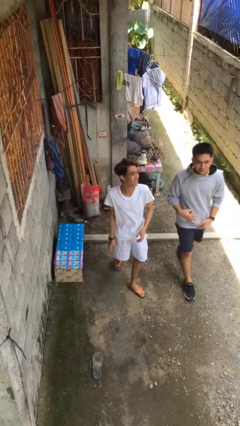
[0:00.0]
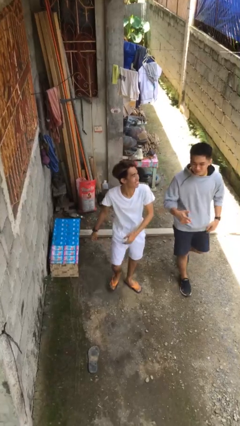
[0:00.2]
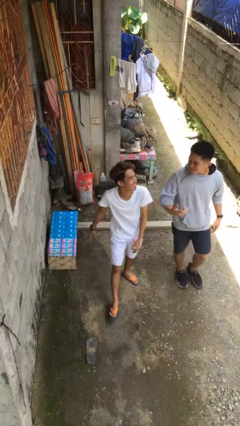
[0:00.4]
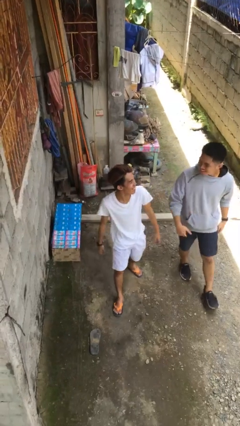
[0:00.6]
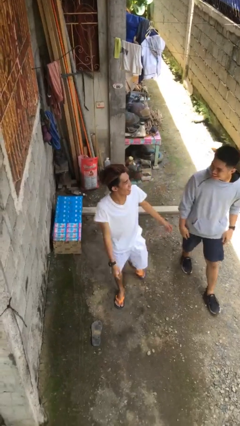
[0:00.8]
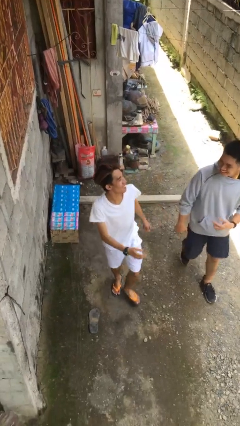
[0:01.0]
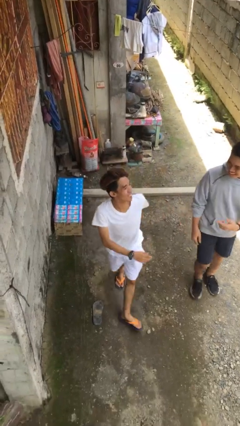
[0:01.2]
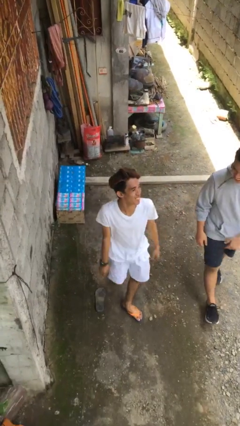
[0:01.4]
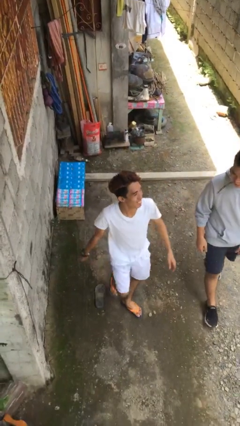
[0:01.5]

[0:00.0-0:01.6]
person talks to person

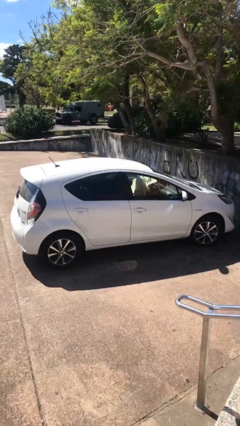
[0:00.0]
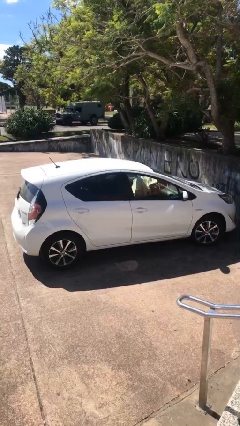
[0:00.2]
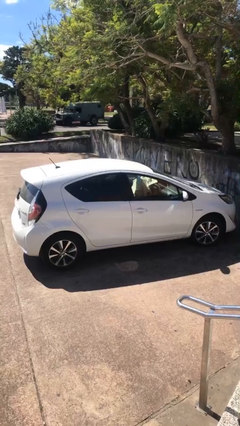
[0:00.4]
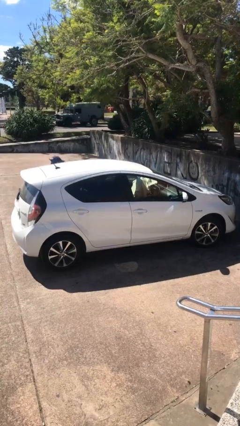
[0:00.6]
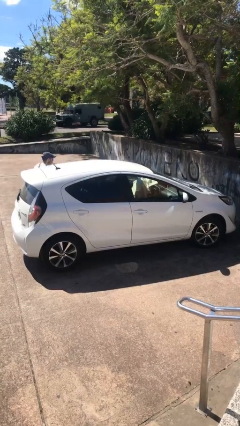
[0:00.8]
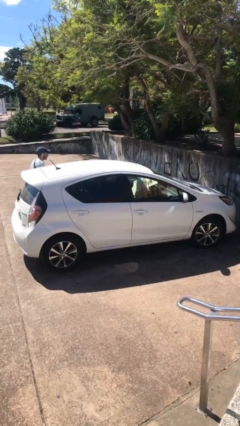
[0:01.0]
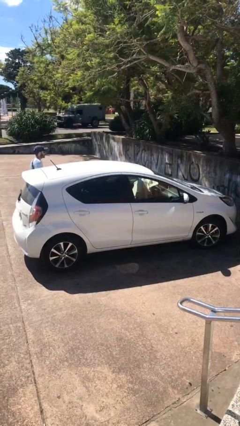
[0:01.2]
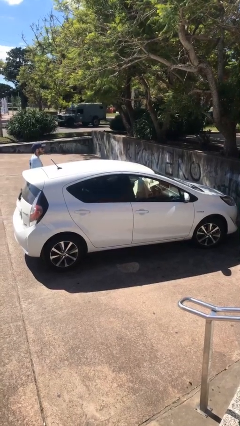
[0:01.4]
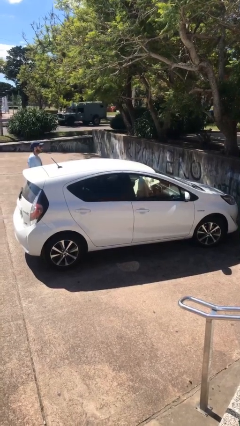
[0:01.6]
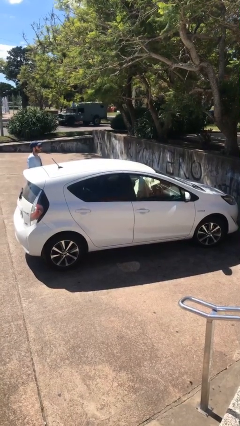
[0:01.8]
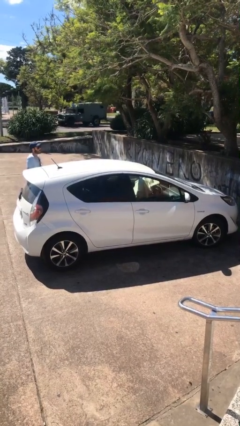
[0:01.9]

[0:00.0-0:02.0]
car drops off person

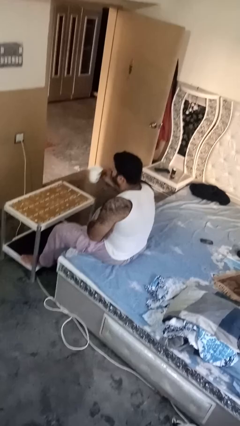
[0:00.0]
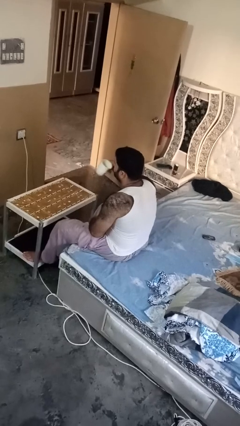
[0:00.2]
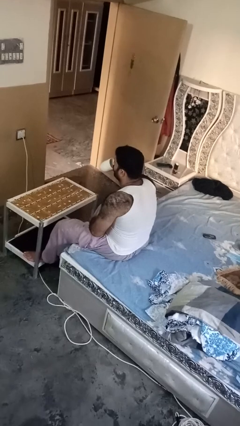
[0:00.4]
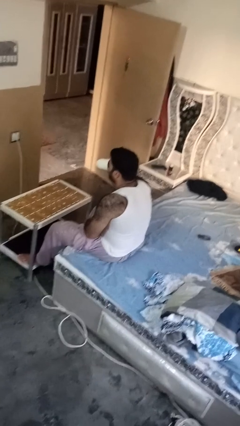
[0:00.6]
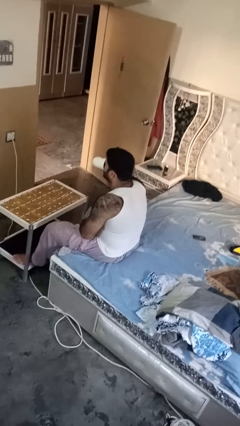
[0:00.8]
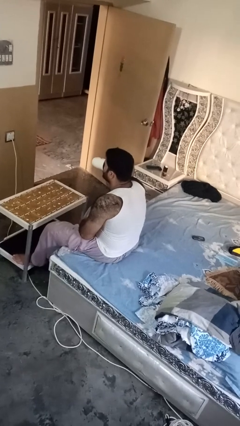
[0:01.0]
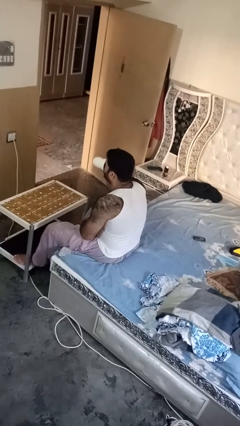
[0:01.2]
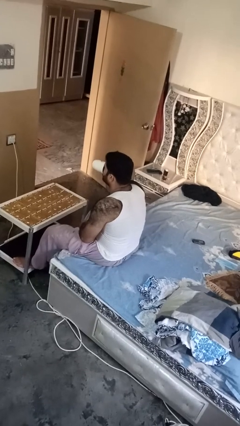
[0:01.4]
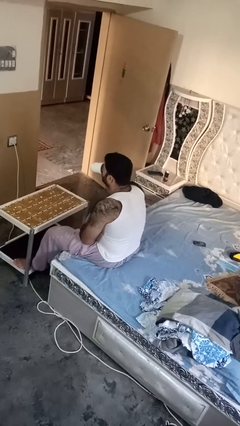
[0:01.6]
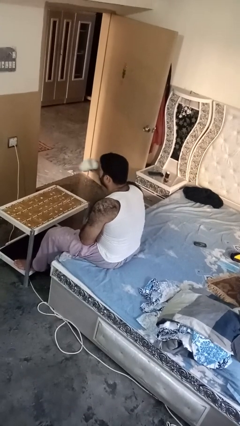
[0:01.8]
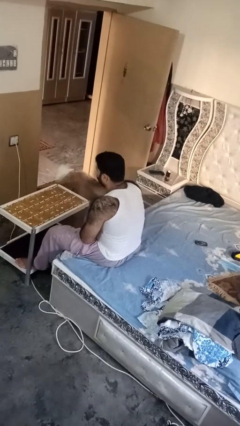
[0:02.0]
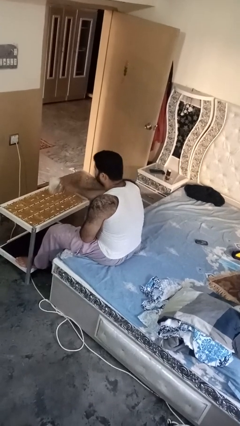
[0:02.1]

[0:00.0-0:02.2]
person drinks from mug

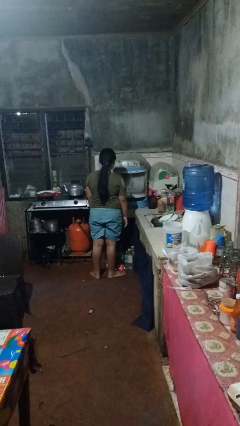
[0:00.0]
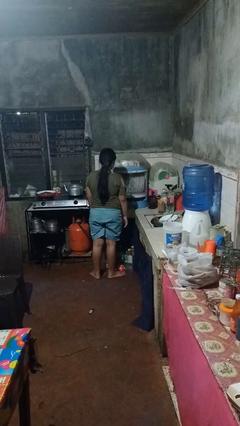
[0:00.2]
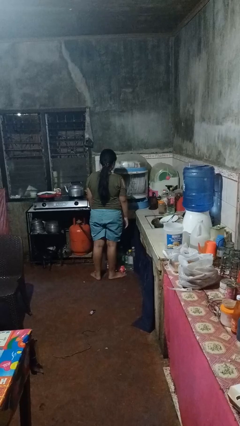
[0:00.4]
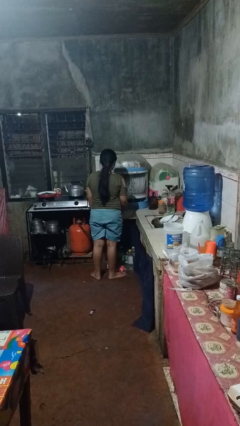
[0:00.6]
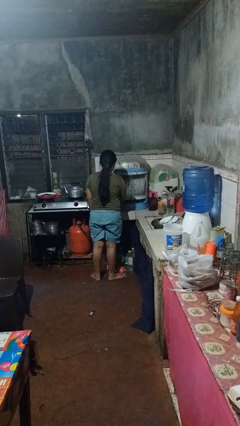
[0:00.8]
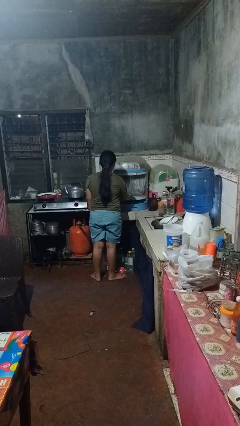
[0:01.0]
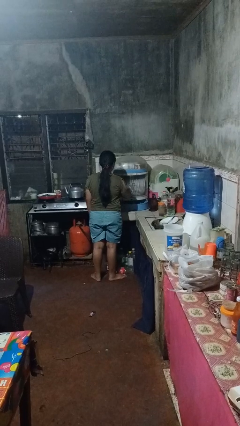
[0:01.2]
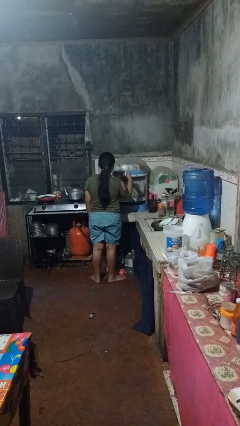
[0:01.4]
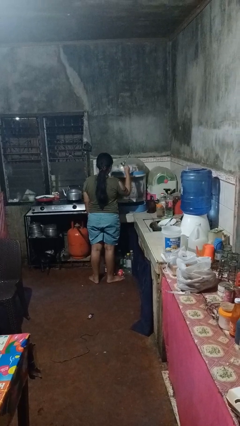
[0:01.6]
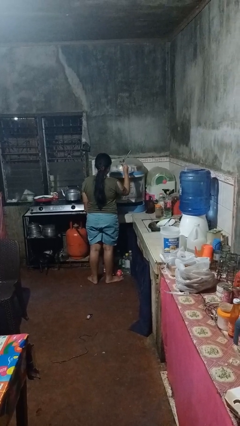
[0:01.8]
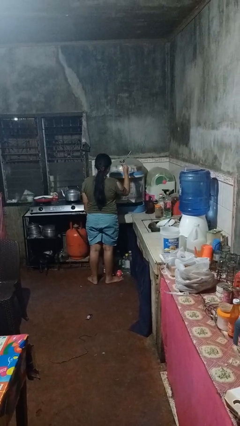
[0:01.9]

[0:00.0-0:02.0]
person takes object from kitchen drawer

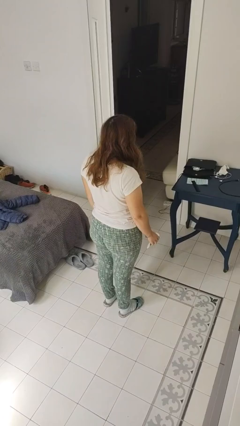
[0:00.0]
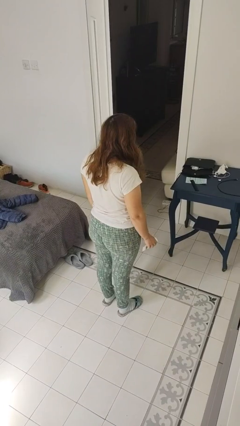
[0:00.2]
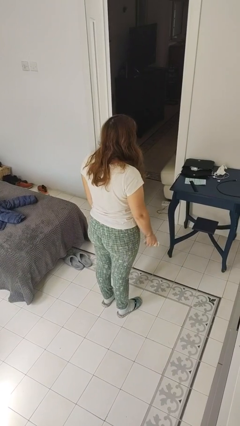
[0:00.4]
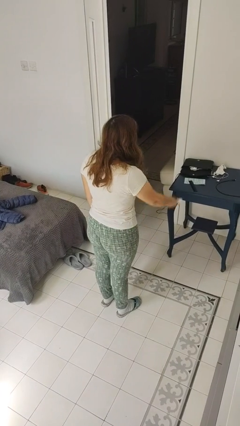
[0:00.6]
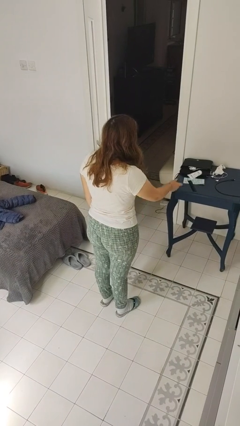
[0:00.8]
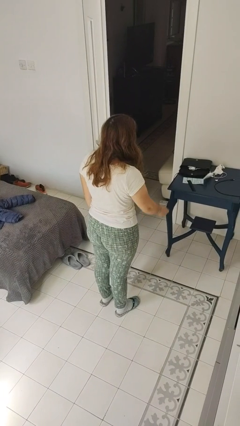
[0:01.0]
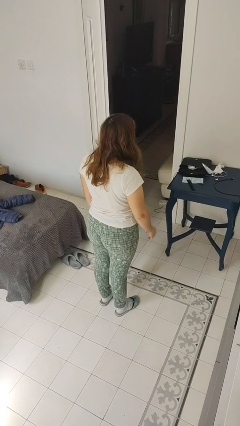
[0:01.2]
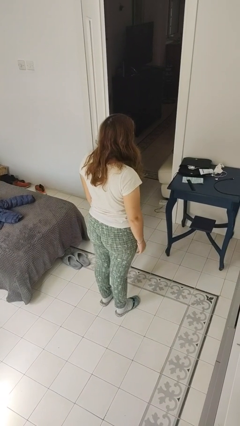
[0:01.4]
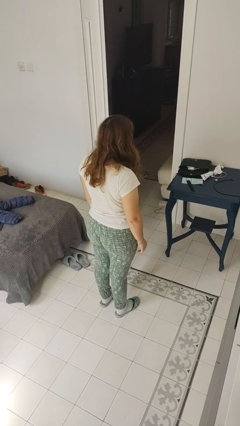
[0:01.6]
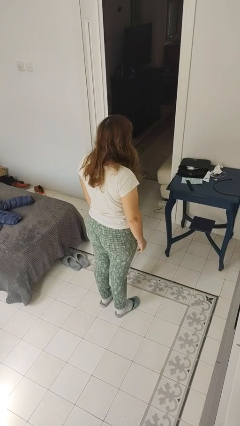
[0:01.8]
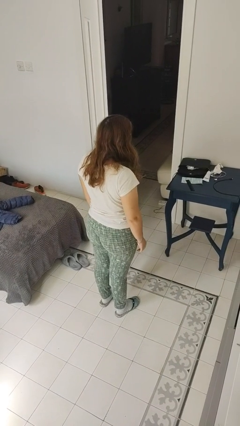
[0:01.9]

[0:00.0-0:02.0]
person throws object on table

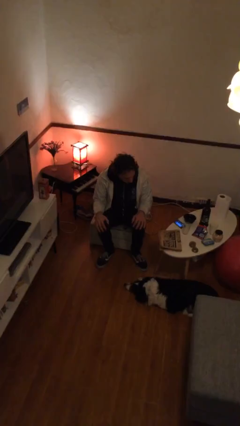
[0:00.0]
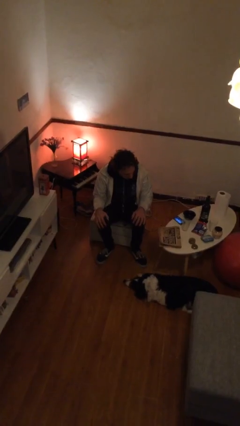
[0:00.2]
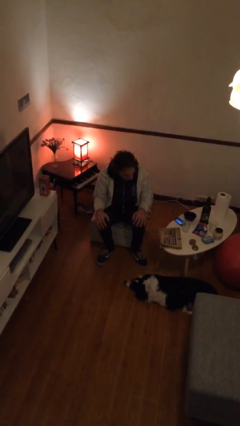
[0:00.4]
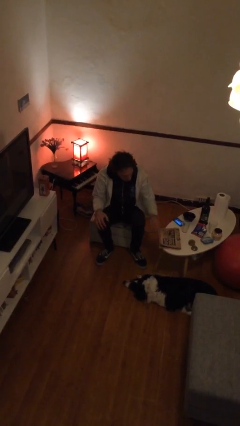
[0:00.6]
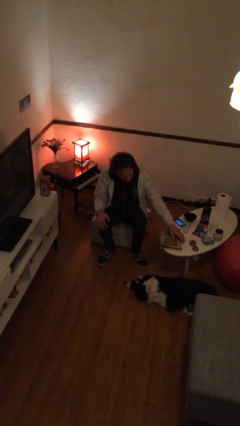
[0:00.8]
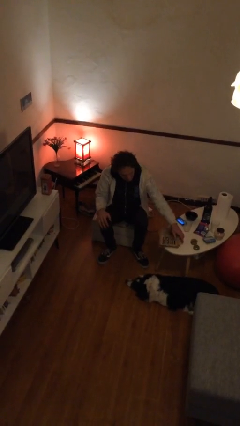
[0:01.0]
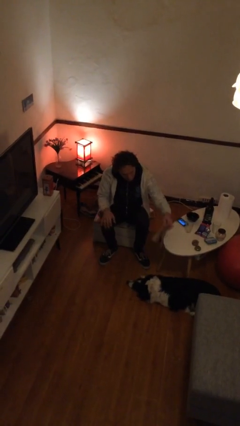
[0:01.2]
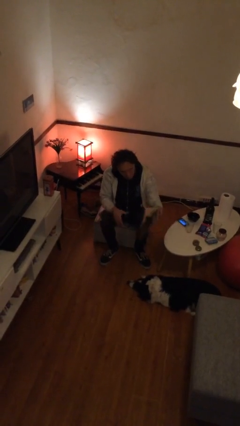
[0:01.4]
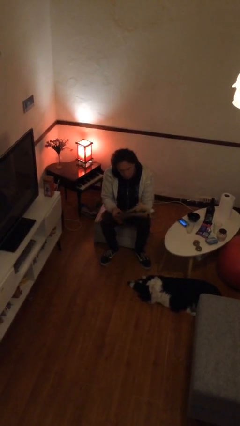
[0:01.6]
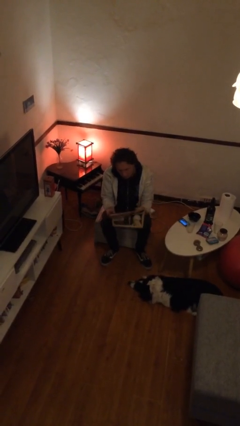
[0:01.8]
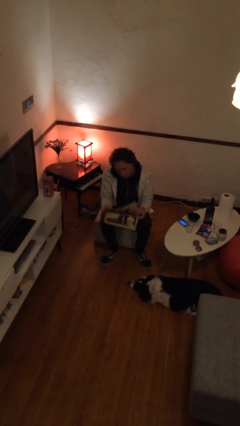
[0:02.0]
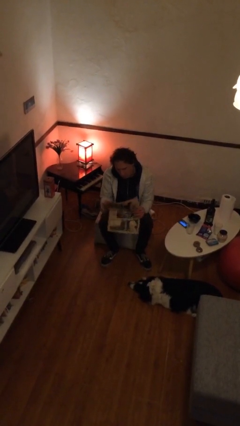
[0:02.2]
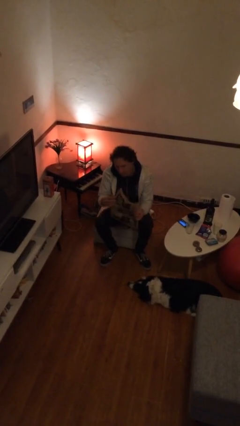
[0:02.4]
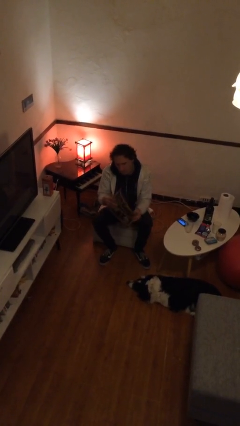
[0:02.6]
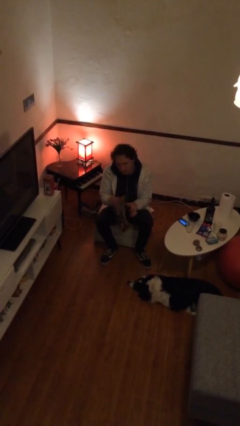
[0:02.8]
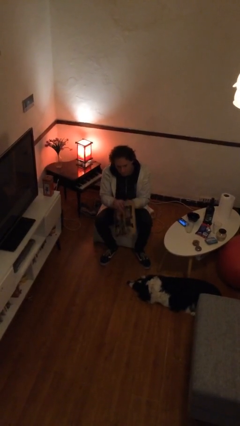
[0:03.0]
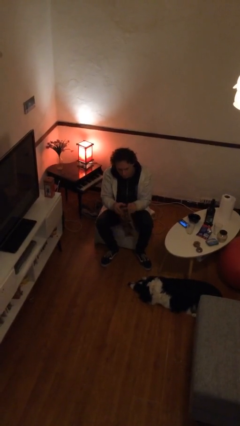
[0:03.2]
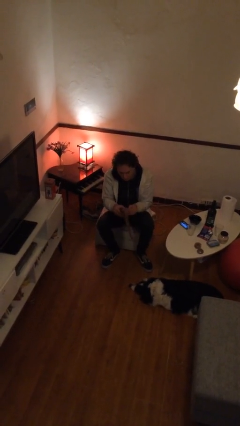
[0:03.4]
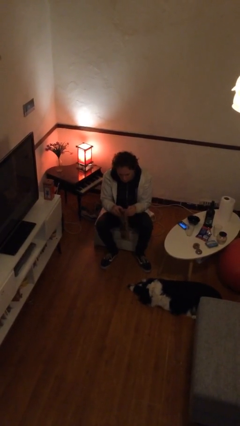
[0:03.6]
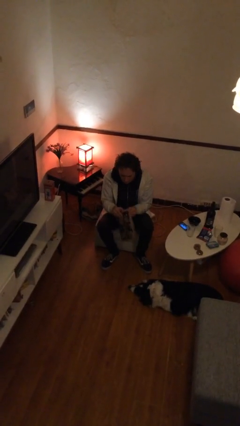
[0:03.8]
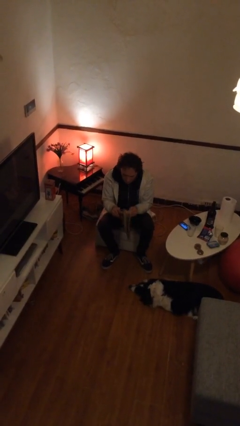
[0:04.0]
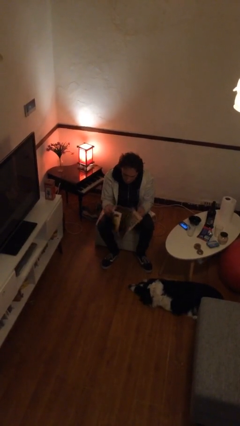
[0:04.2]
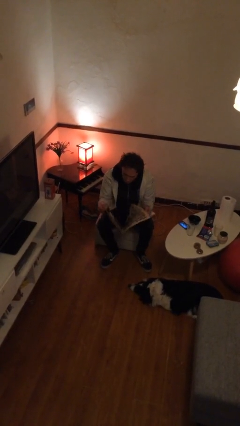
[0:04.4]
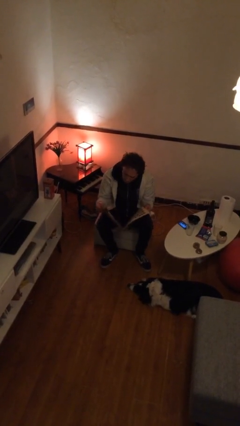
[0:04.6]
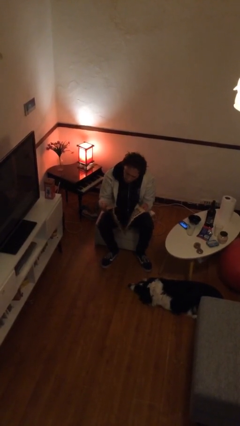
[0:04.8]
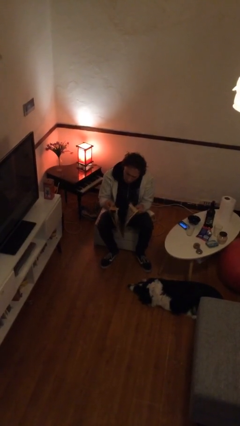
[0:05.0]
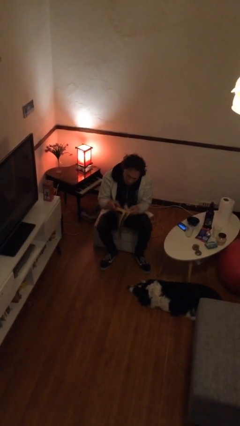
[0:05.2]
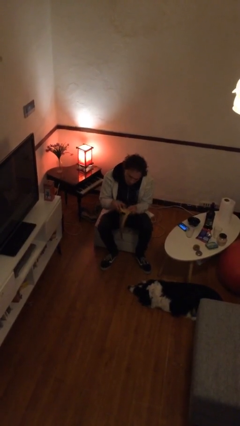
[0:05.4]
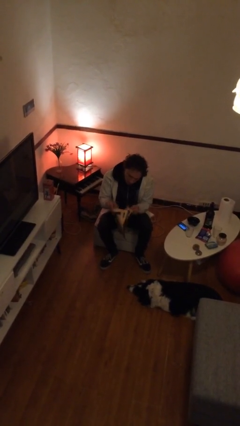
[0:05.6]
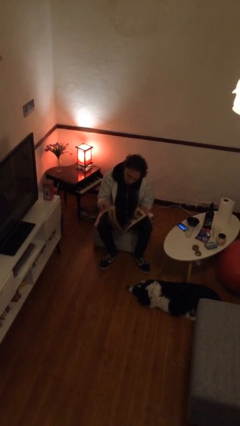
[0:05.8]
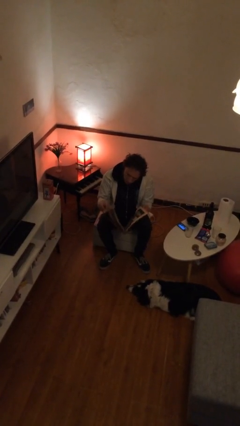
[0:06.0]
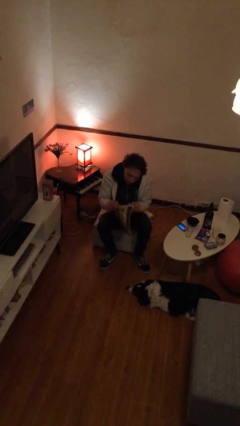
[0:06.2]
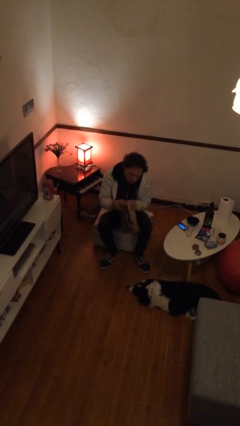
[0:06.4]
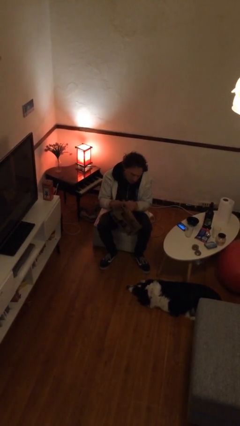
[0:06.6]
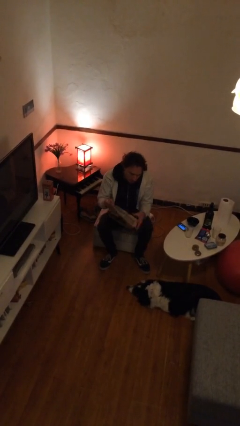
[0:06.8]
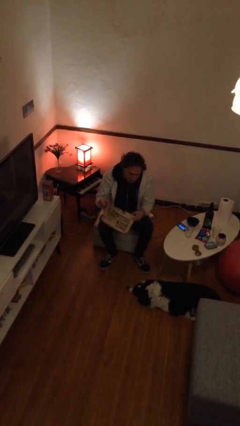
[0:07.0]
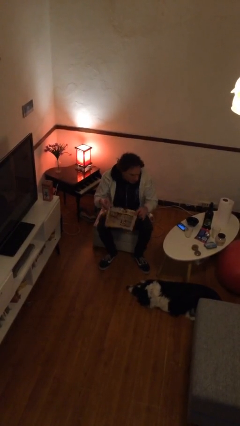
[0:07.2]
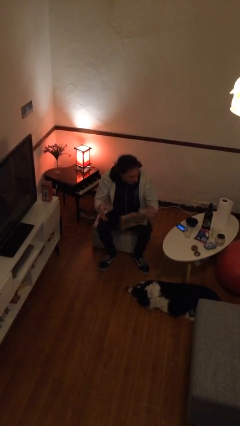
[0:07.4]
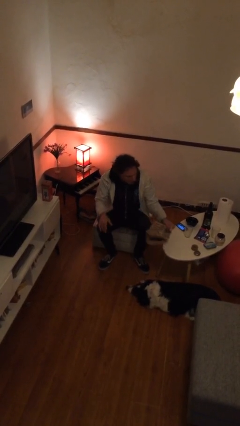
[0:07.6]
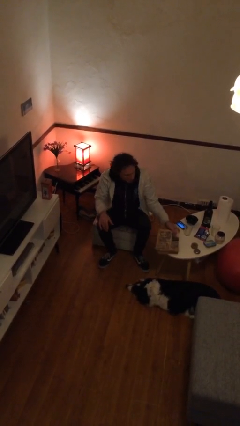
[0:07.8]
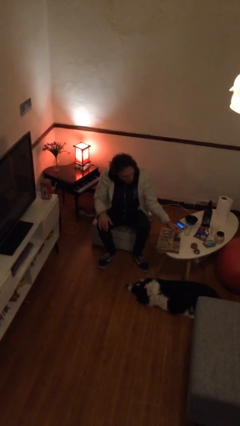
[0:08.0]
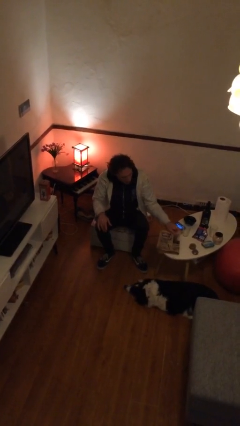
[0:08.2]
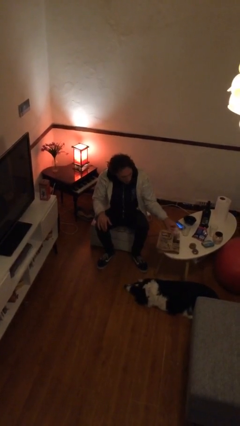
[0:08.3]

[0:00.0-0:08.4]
person reads newspaper
